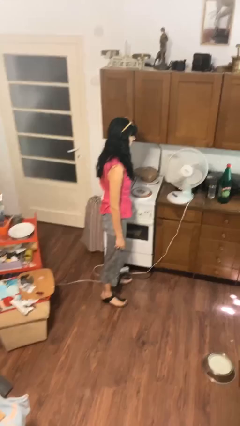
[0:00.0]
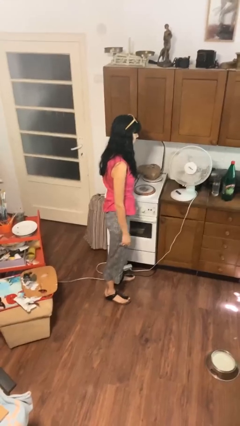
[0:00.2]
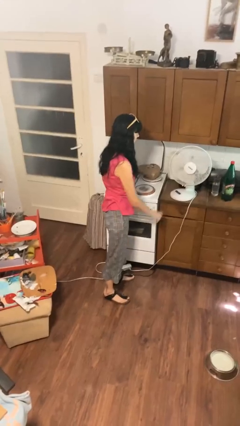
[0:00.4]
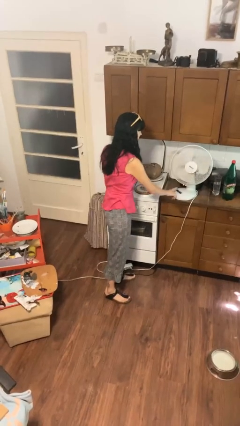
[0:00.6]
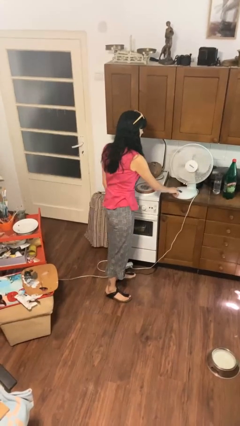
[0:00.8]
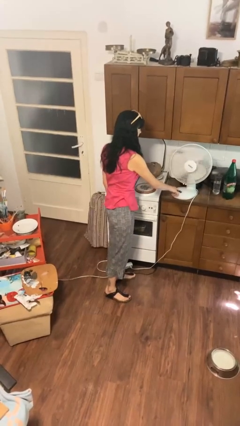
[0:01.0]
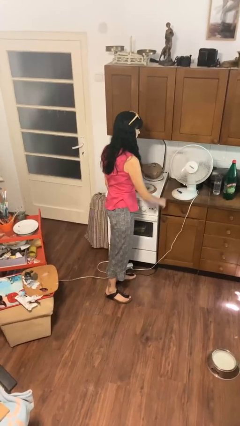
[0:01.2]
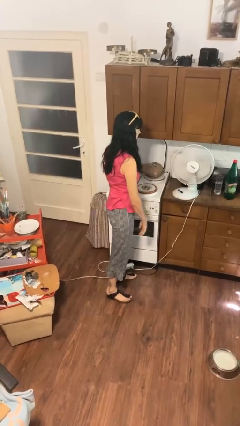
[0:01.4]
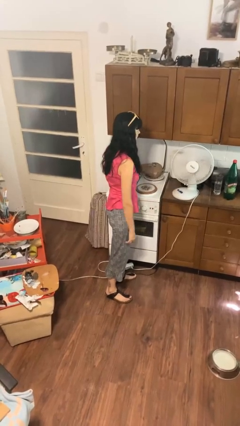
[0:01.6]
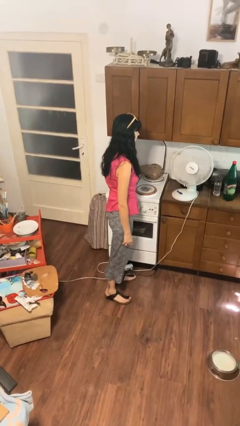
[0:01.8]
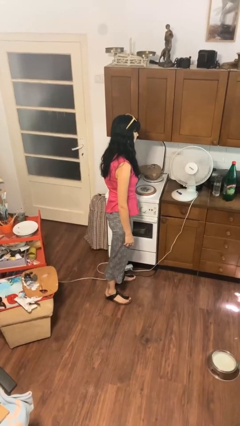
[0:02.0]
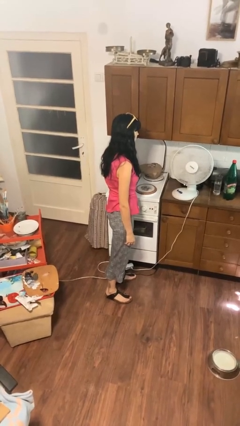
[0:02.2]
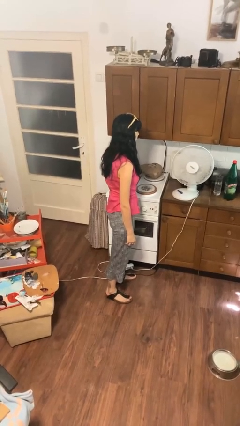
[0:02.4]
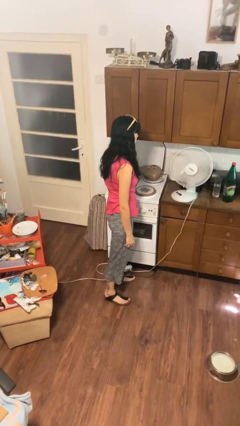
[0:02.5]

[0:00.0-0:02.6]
person turns on fan

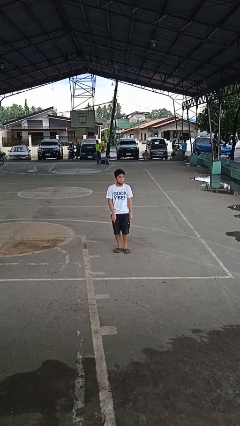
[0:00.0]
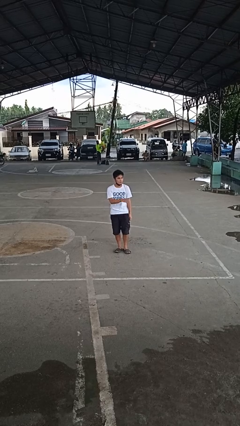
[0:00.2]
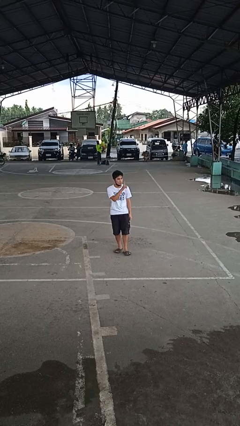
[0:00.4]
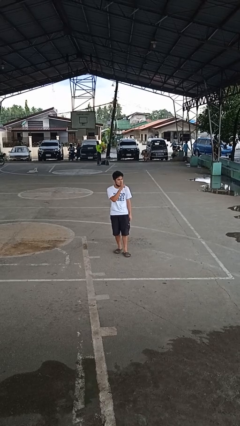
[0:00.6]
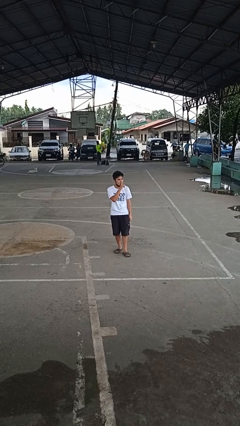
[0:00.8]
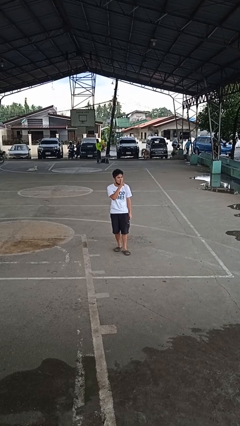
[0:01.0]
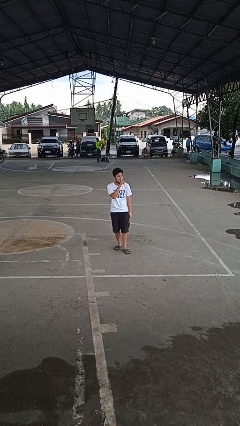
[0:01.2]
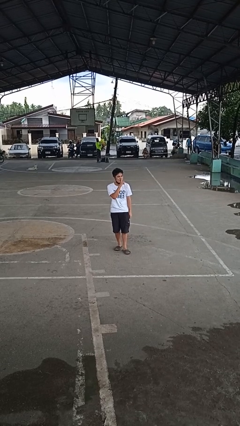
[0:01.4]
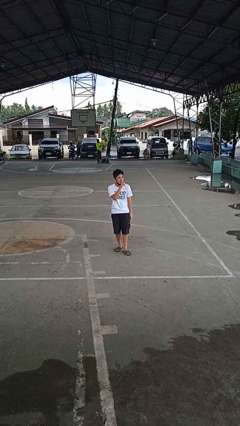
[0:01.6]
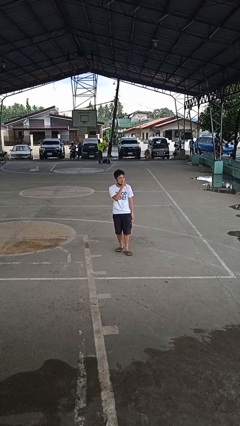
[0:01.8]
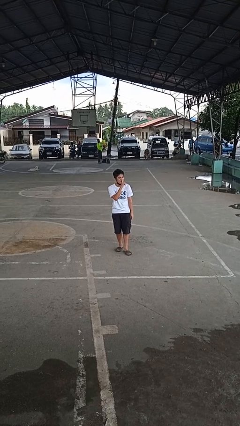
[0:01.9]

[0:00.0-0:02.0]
person gestures be quiet

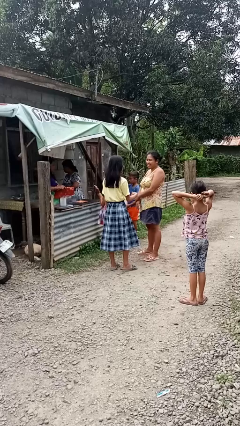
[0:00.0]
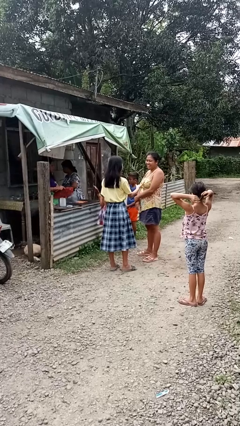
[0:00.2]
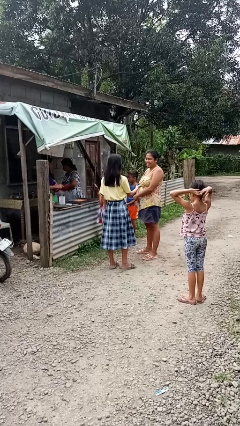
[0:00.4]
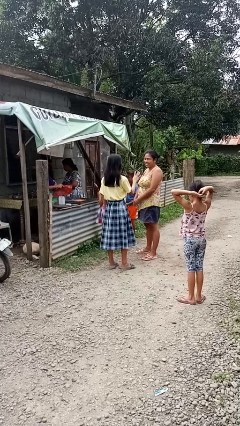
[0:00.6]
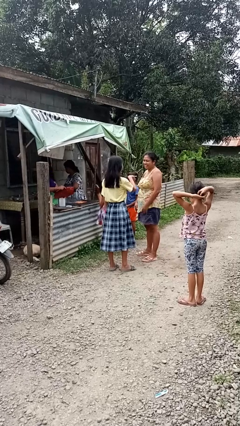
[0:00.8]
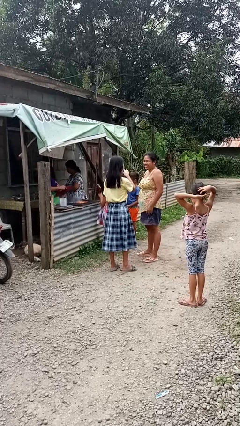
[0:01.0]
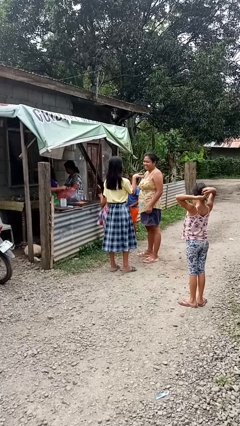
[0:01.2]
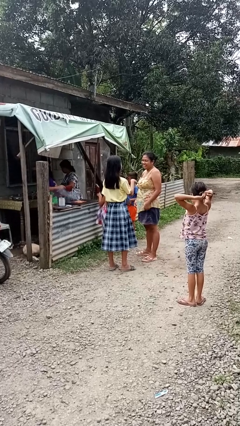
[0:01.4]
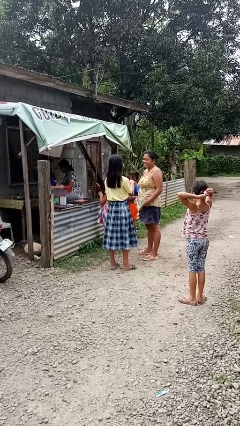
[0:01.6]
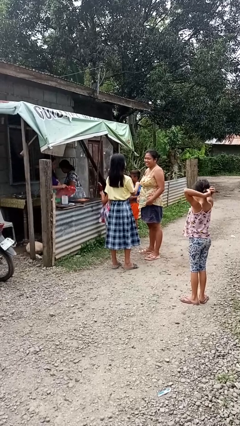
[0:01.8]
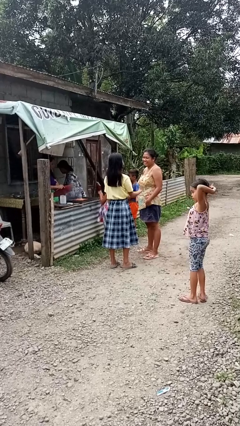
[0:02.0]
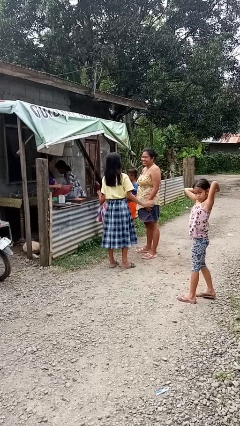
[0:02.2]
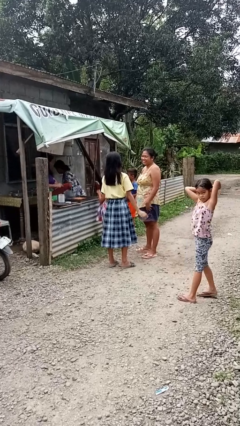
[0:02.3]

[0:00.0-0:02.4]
person talks to person

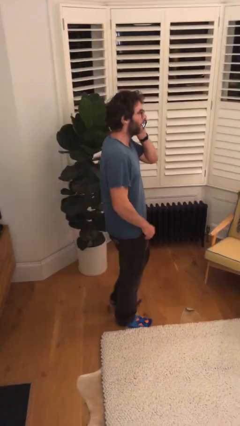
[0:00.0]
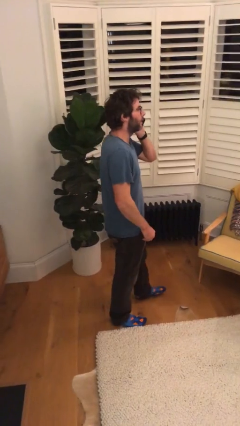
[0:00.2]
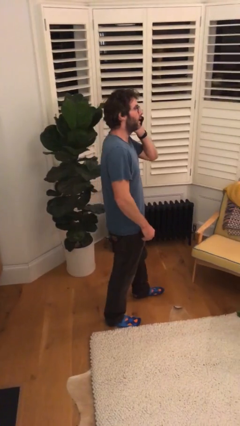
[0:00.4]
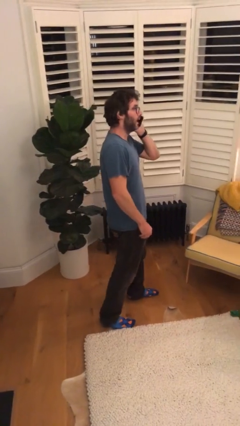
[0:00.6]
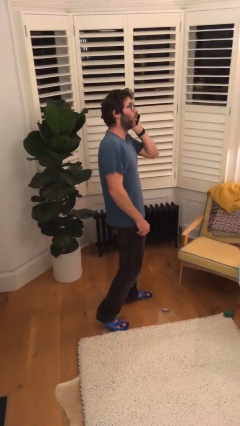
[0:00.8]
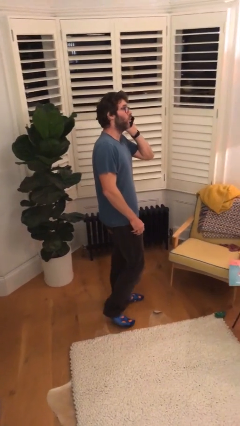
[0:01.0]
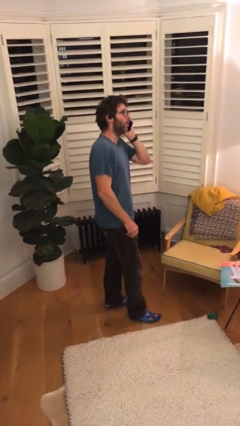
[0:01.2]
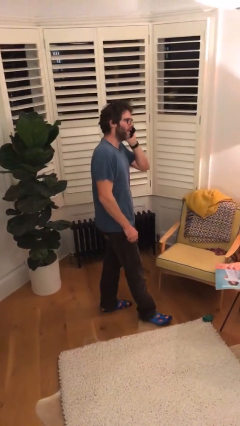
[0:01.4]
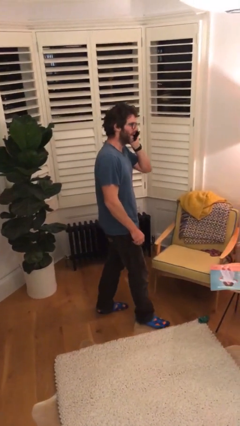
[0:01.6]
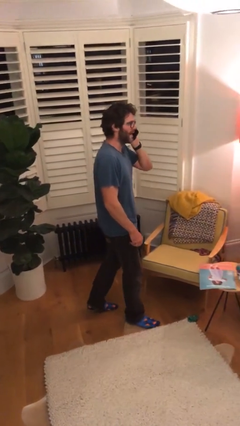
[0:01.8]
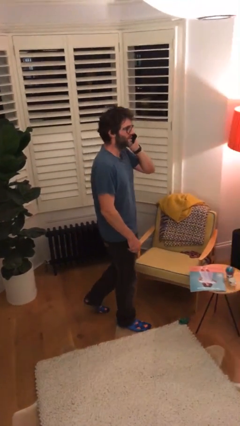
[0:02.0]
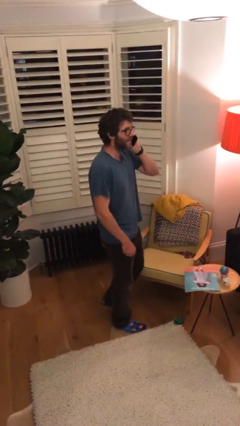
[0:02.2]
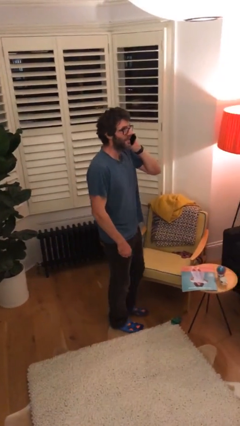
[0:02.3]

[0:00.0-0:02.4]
person talks on phone

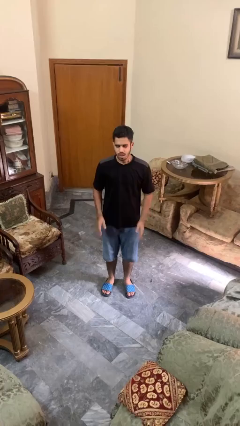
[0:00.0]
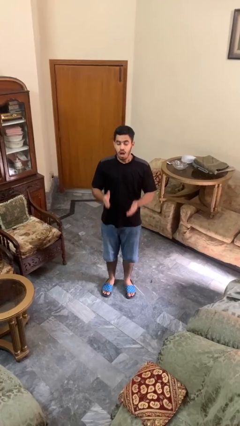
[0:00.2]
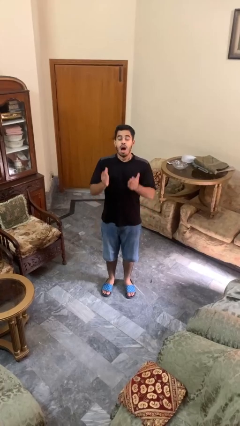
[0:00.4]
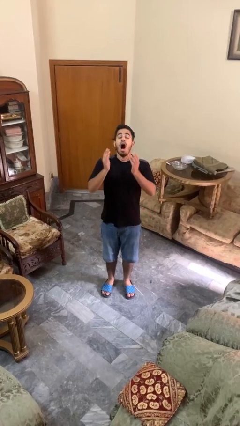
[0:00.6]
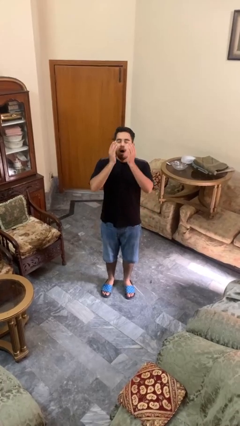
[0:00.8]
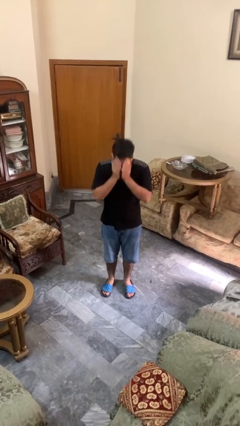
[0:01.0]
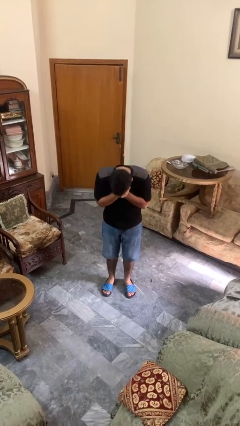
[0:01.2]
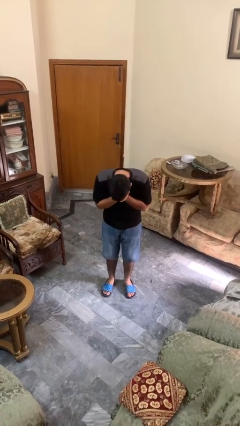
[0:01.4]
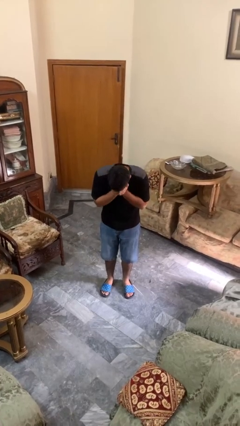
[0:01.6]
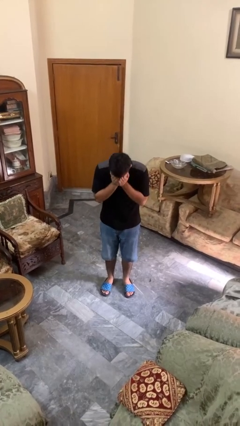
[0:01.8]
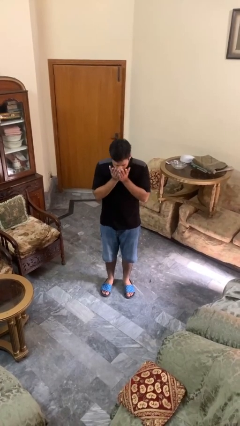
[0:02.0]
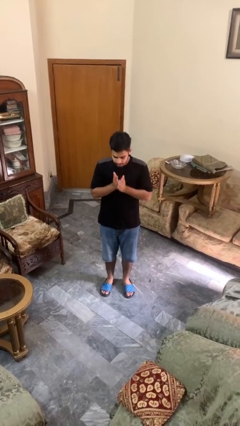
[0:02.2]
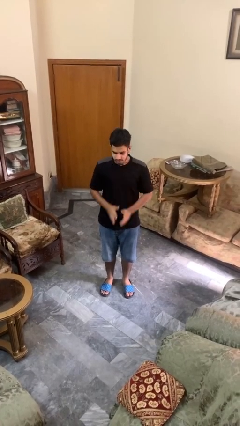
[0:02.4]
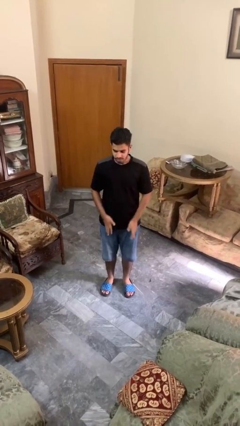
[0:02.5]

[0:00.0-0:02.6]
person sneezes into hand

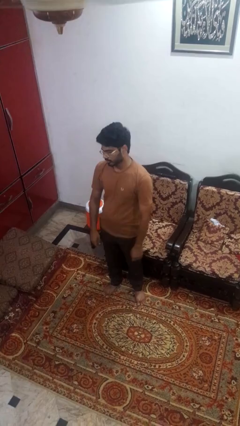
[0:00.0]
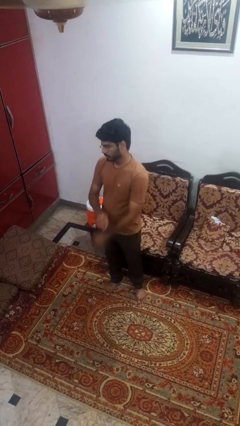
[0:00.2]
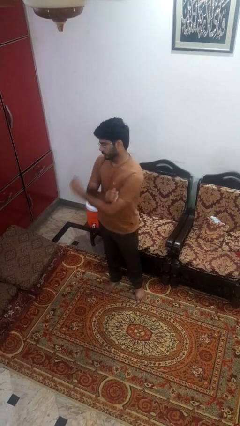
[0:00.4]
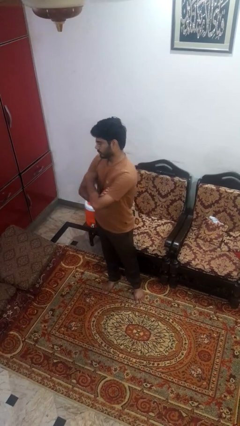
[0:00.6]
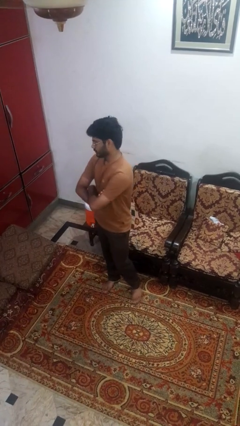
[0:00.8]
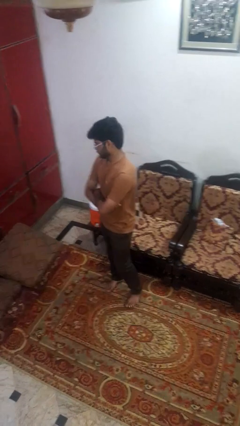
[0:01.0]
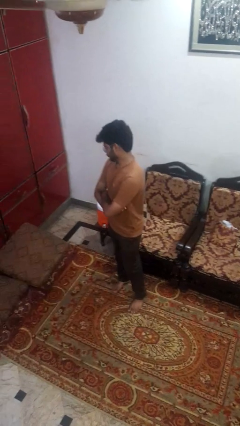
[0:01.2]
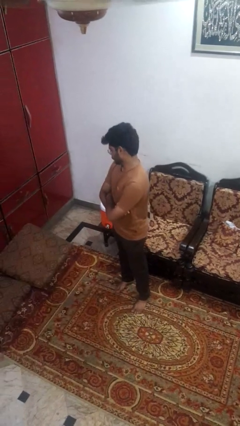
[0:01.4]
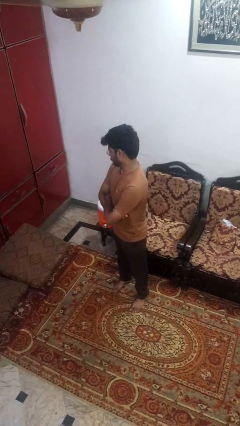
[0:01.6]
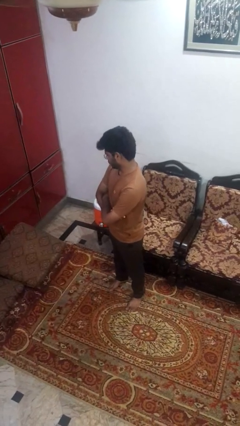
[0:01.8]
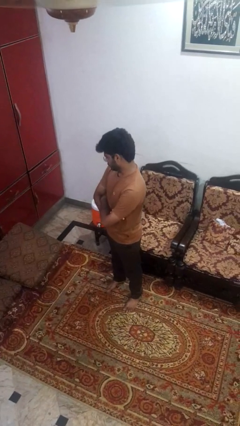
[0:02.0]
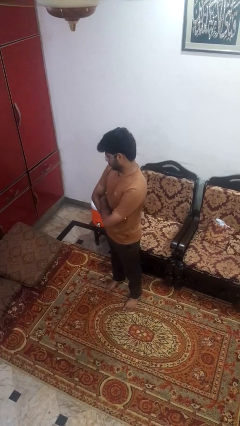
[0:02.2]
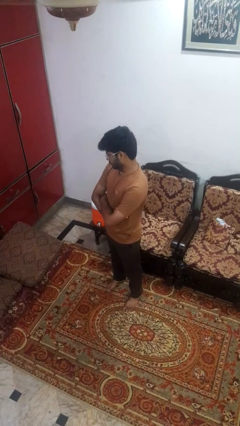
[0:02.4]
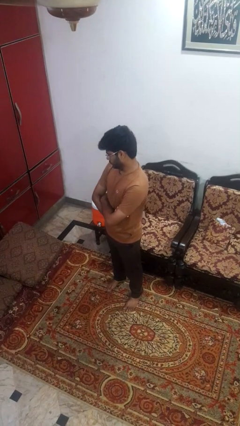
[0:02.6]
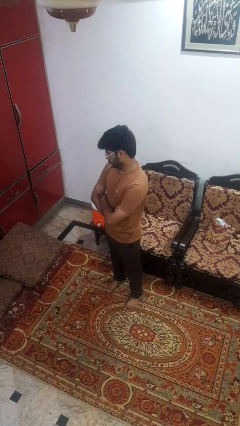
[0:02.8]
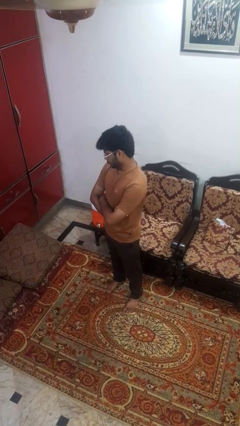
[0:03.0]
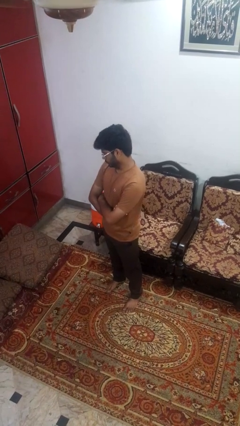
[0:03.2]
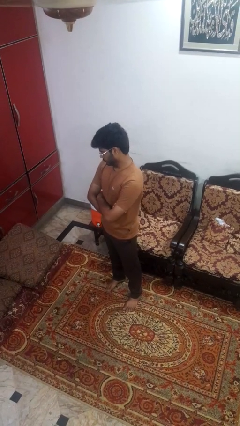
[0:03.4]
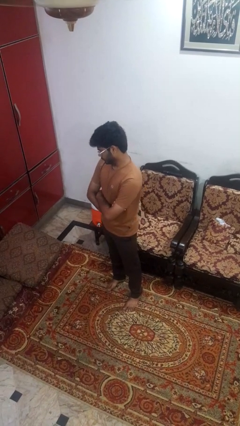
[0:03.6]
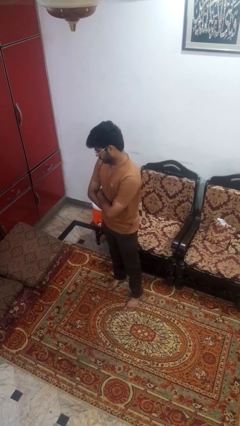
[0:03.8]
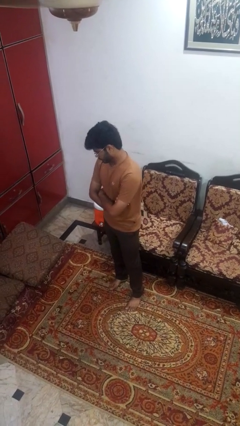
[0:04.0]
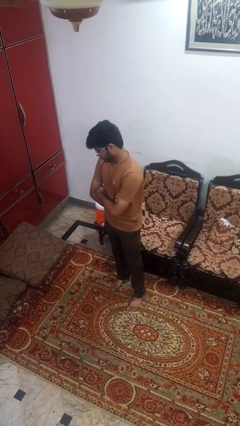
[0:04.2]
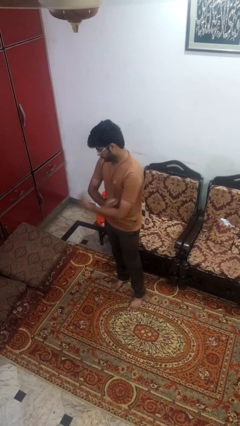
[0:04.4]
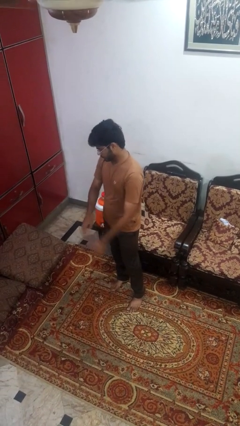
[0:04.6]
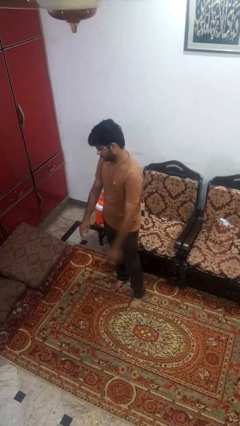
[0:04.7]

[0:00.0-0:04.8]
person crosses arms

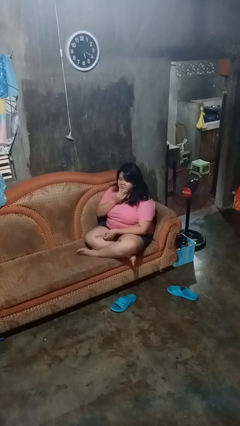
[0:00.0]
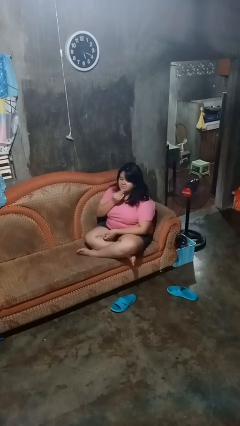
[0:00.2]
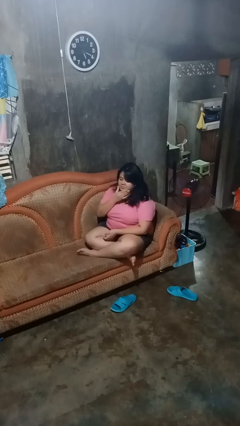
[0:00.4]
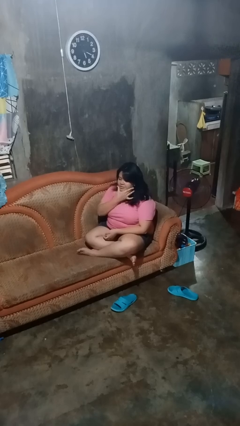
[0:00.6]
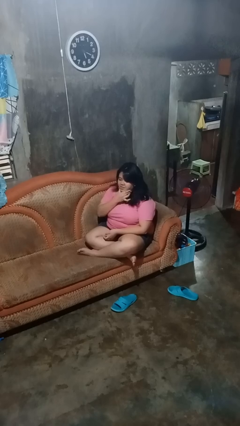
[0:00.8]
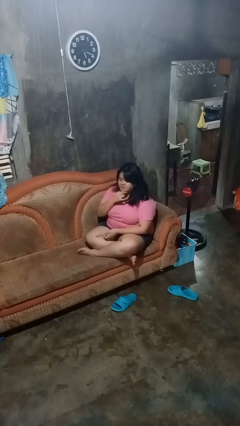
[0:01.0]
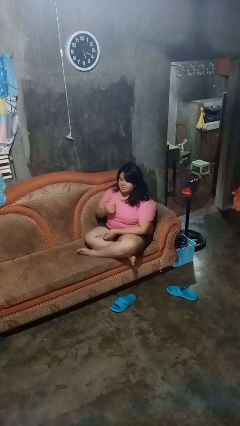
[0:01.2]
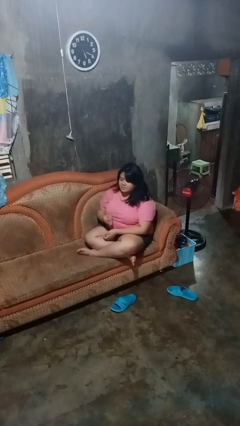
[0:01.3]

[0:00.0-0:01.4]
person strokes chin
